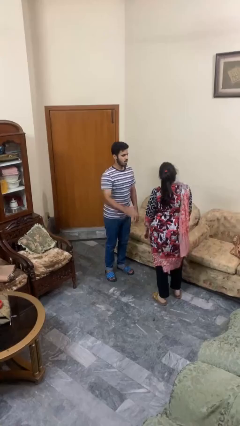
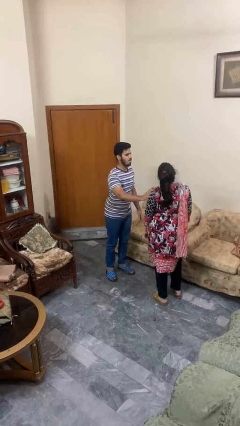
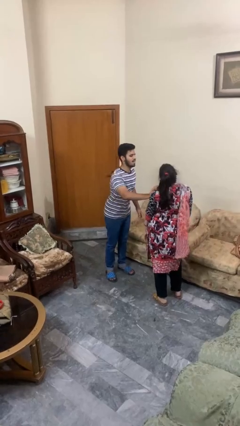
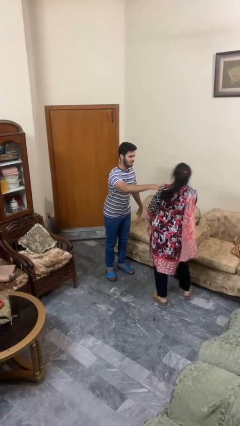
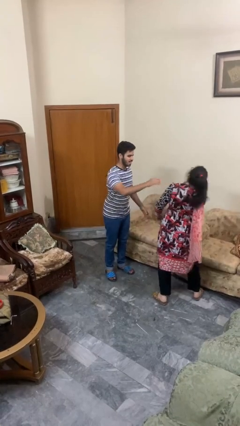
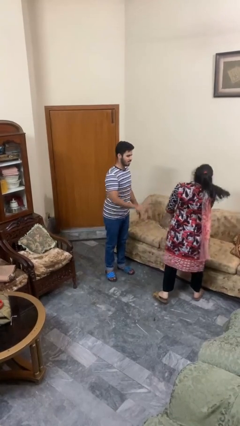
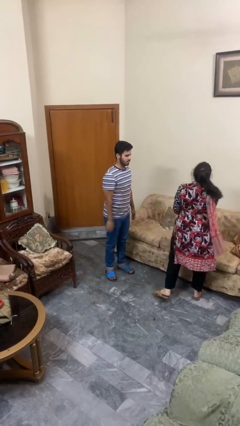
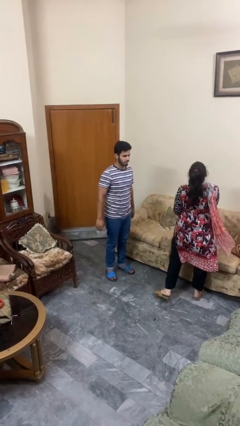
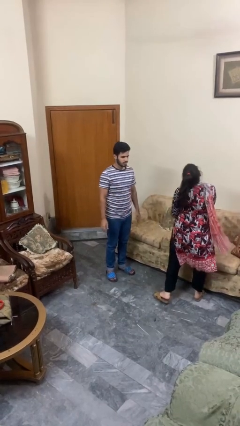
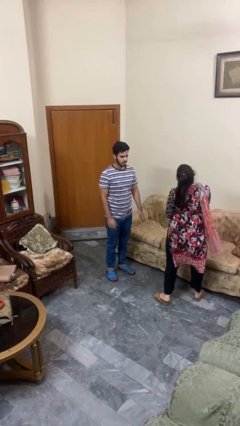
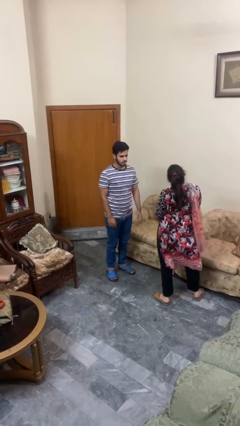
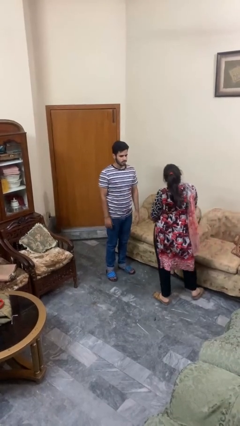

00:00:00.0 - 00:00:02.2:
person shoves person

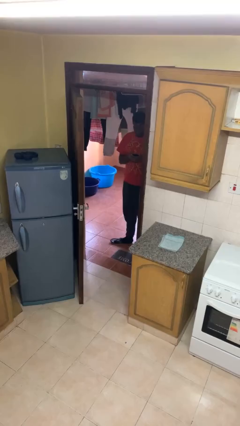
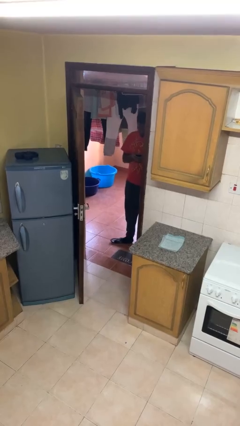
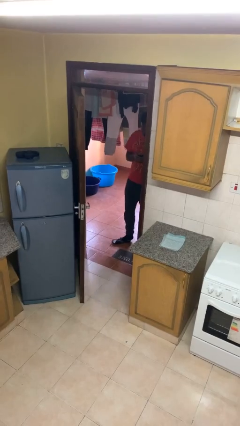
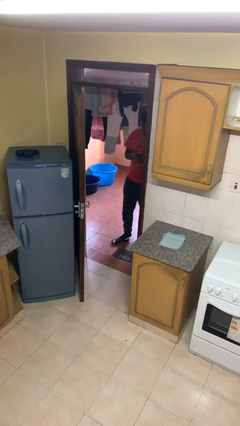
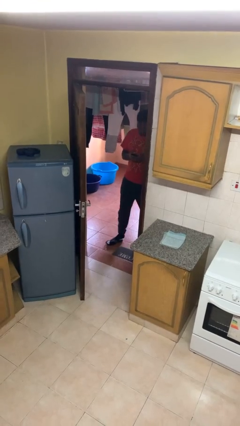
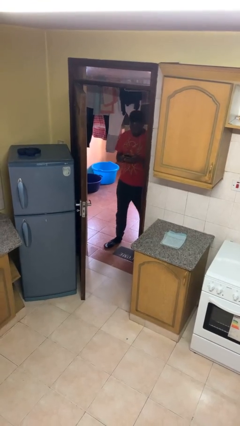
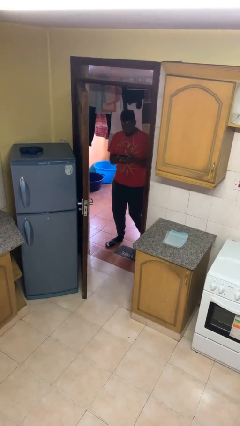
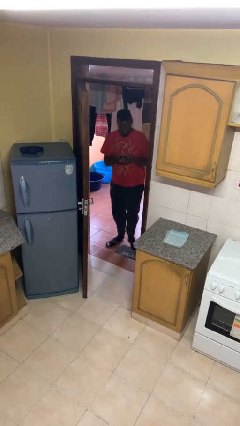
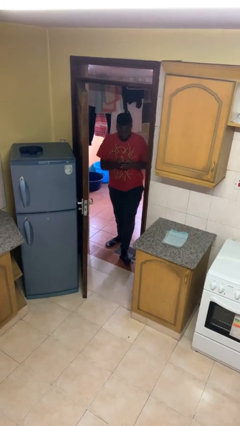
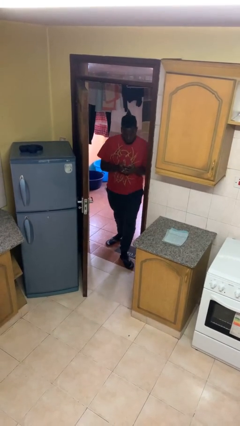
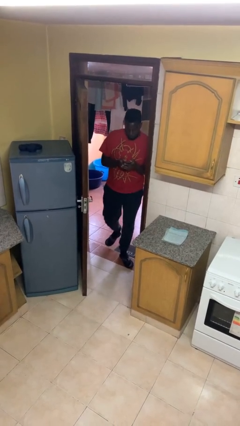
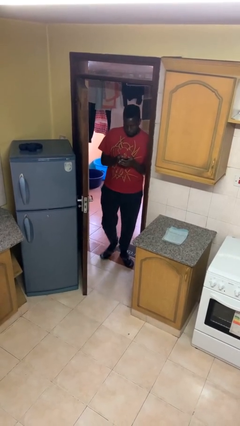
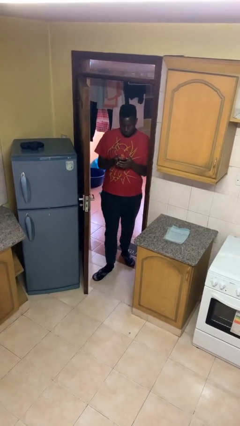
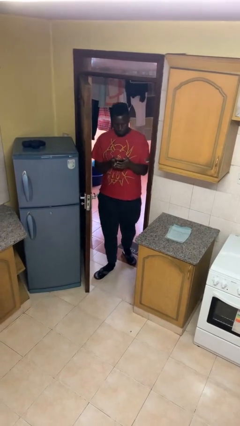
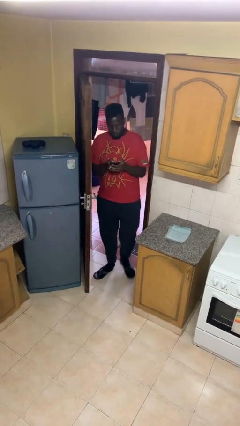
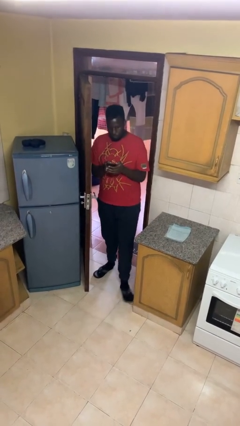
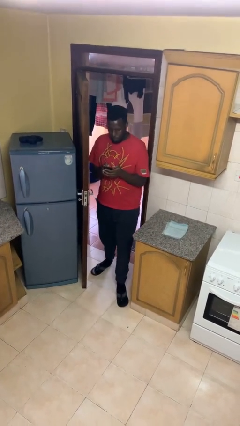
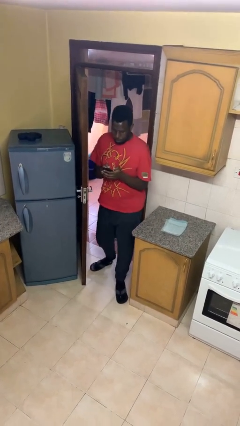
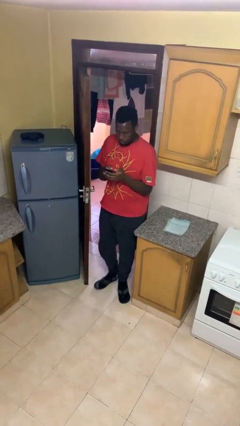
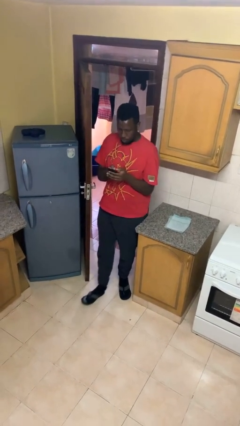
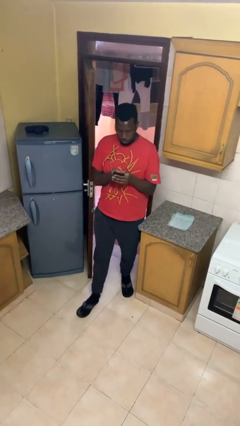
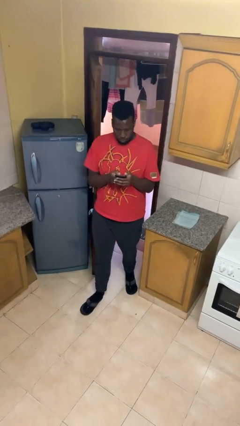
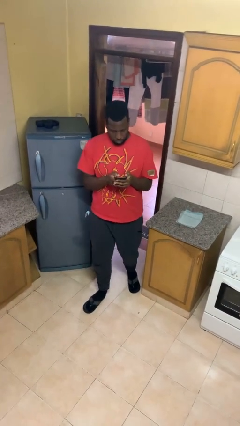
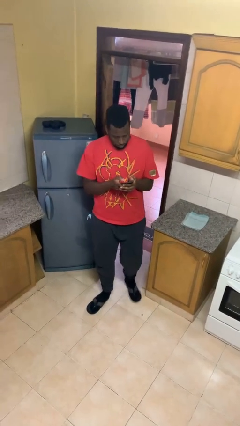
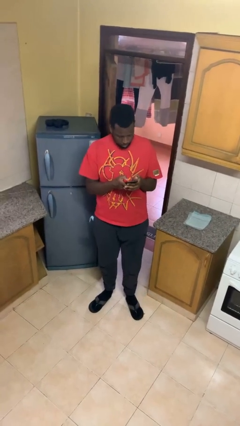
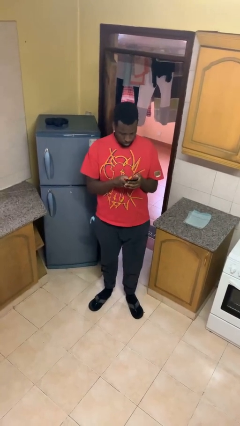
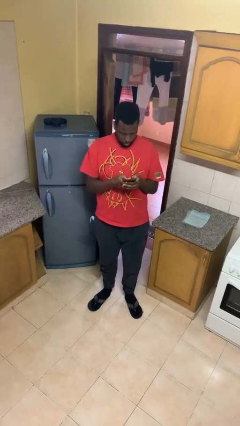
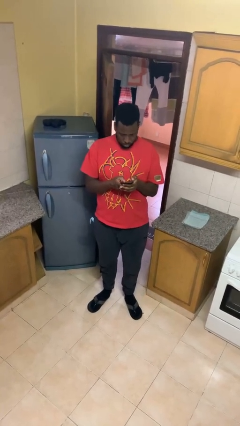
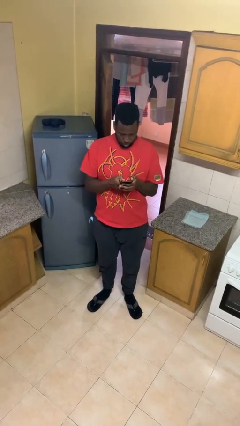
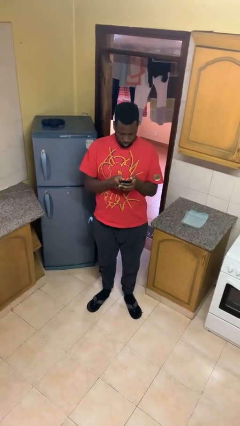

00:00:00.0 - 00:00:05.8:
person enters scene through structure

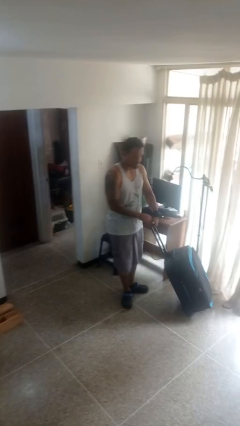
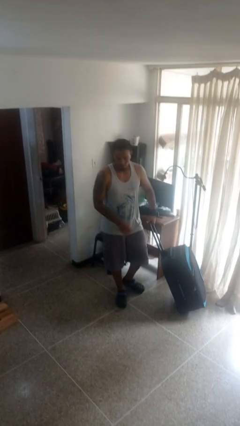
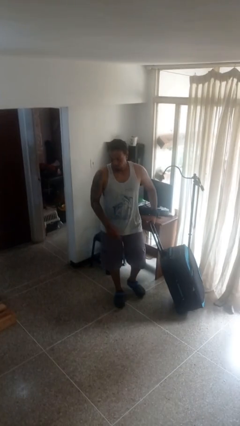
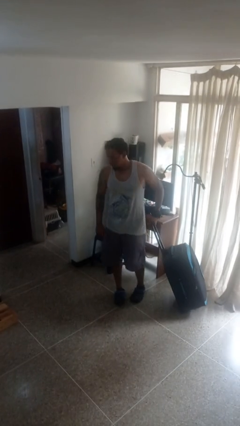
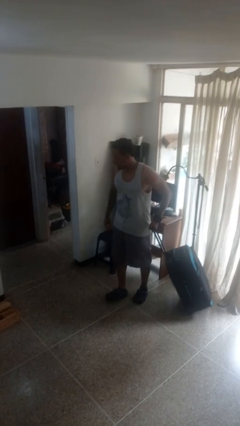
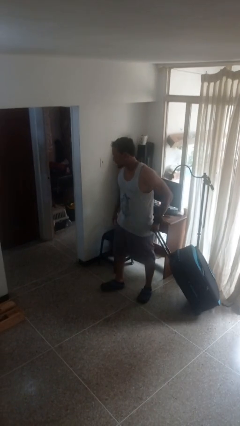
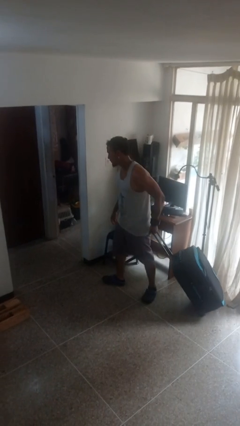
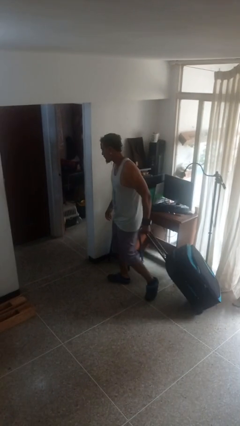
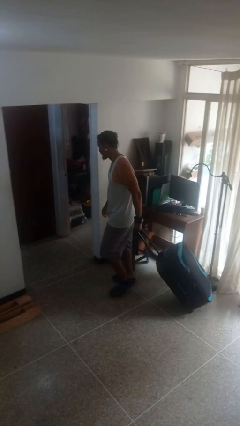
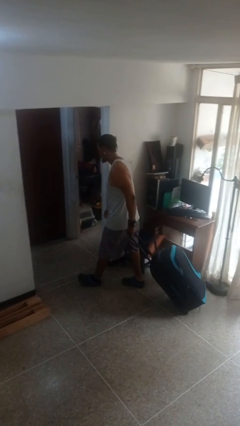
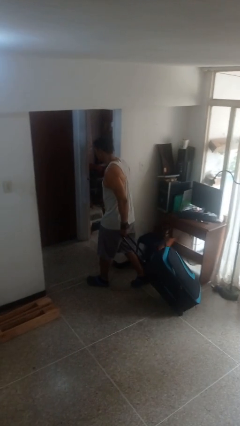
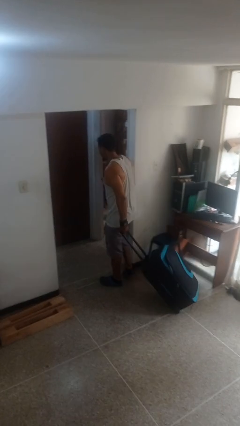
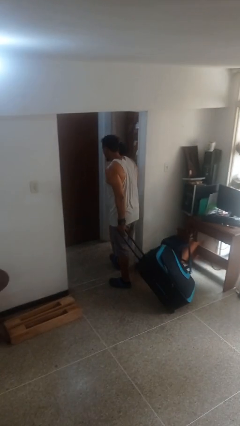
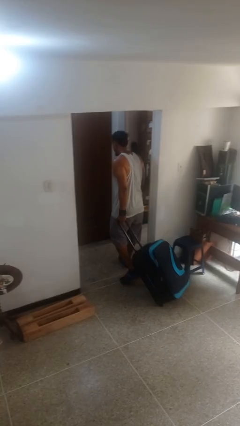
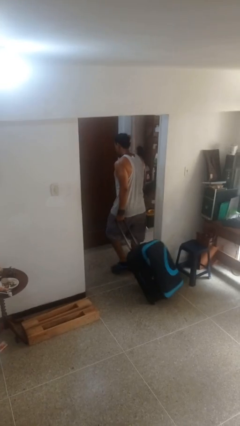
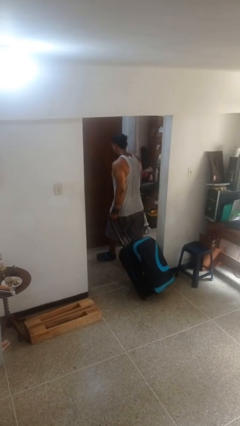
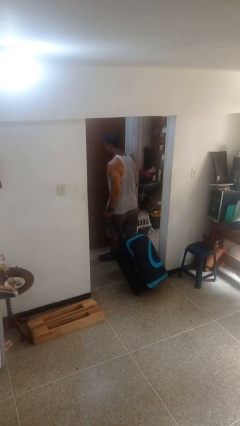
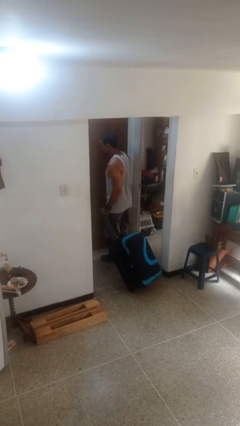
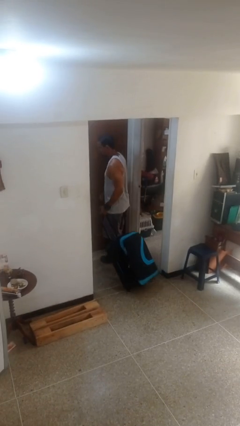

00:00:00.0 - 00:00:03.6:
person pulls wheeled cart

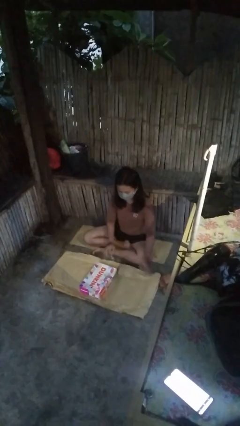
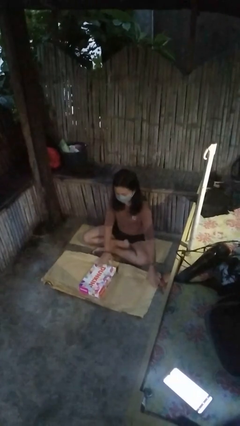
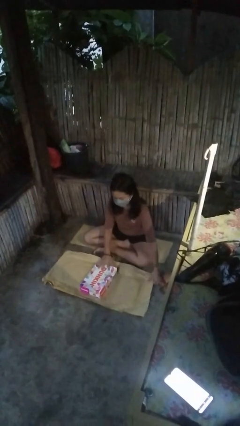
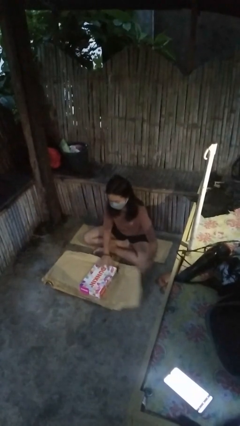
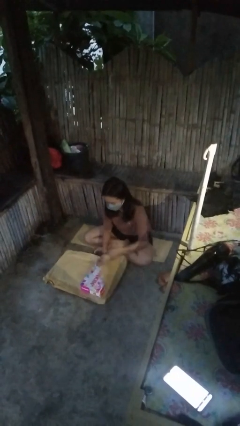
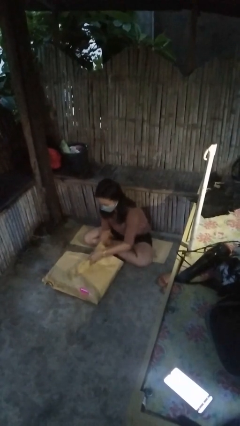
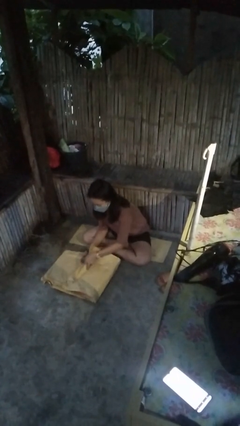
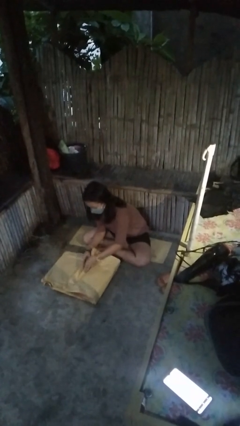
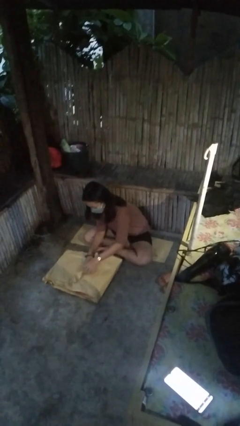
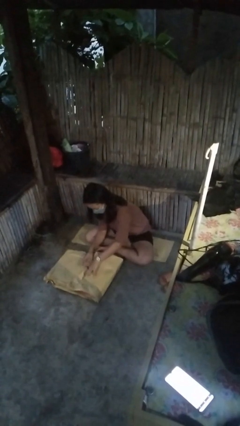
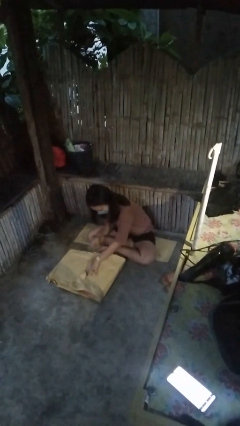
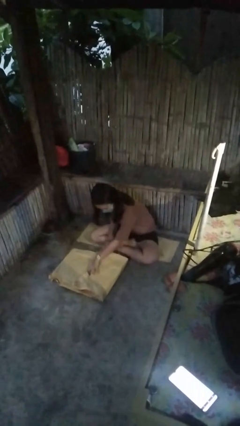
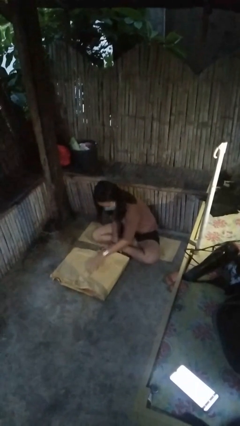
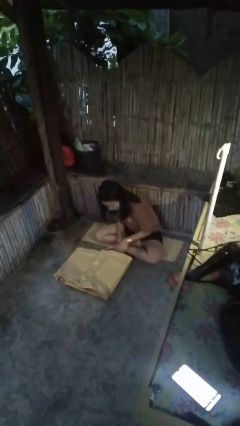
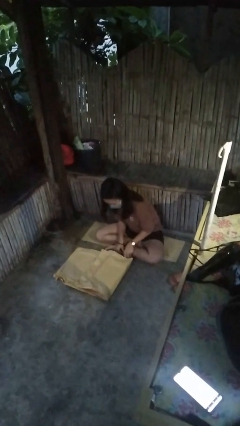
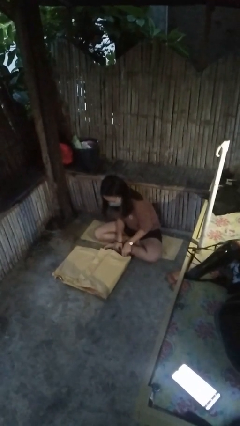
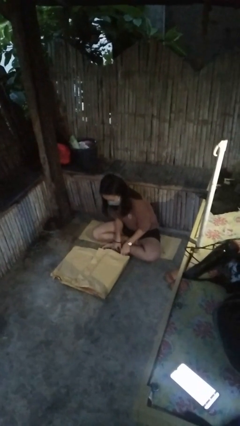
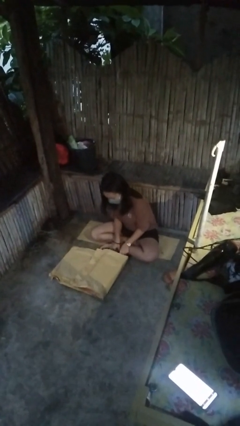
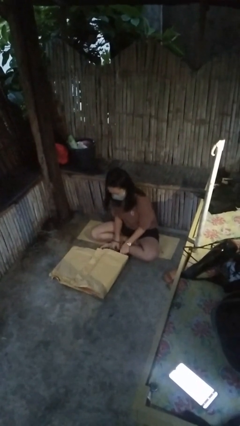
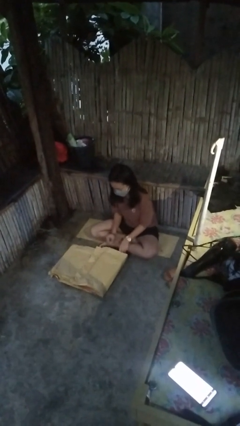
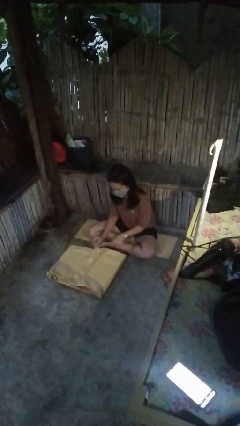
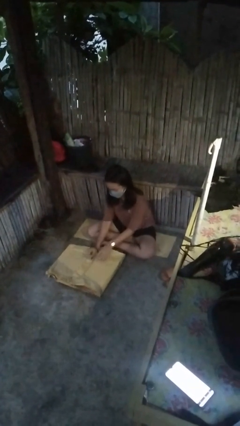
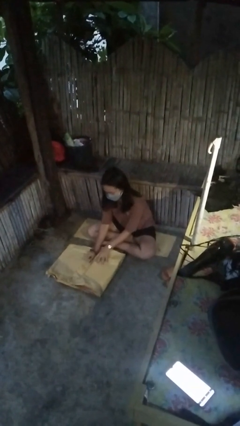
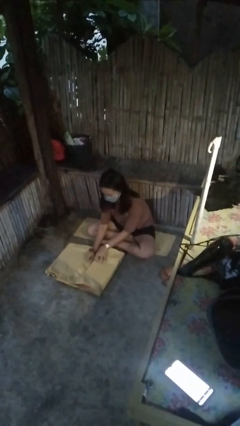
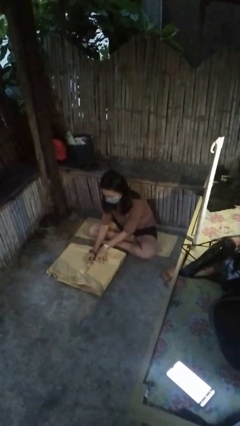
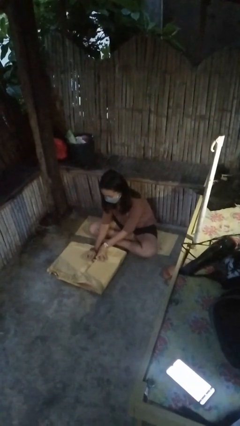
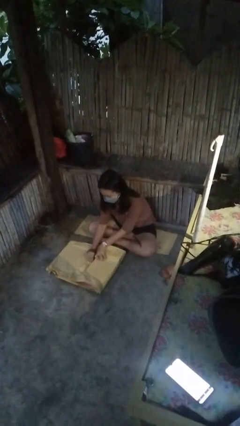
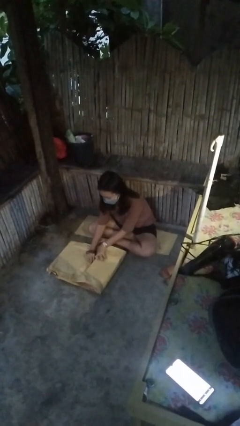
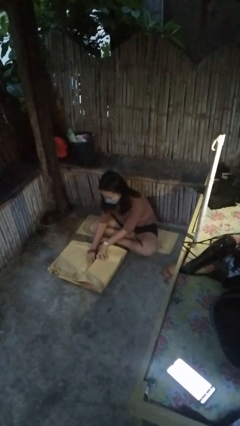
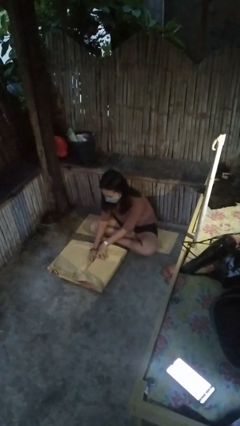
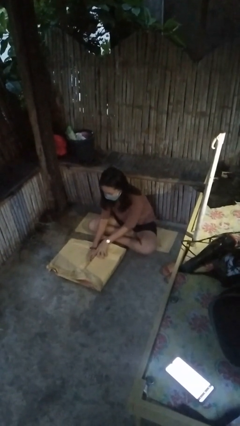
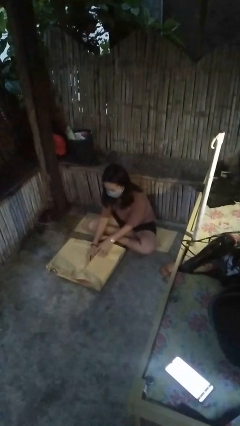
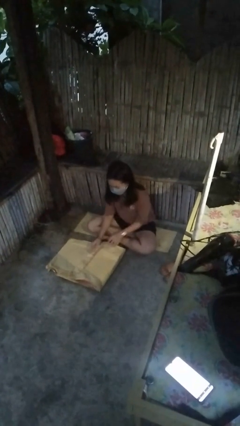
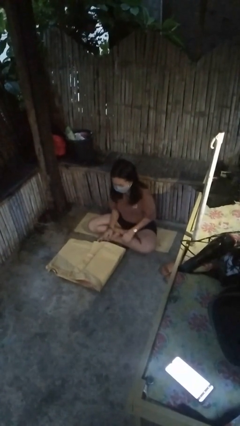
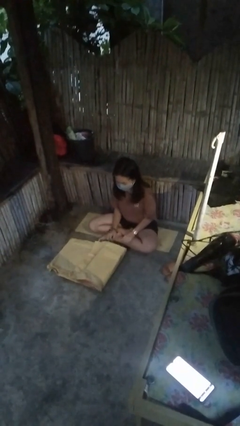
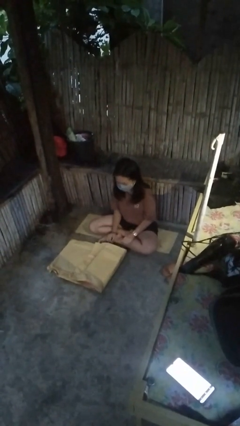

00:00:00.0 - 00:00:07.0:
person wraps box
